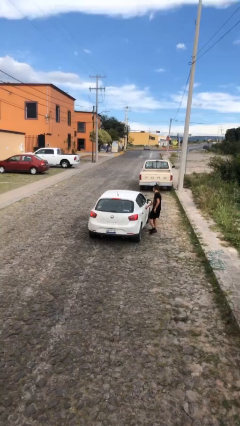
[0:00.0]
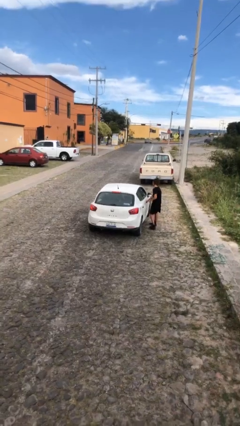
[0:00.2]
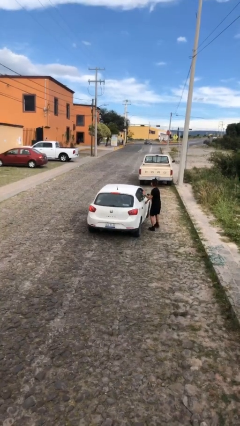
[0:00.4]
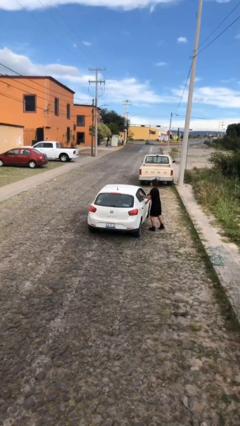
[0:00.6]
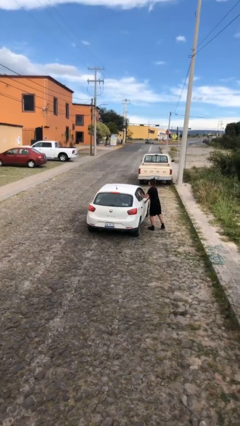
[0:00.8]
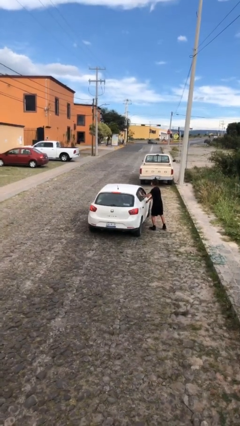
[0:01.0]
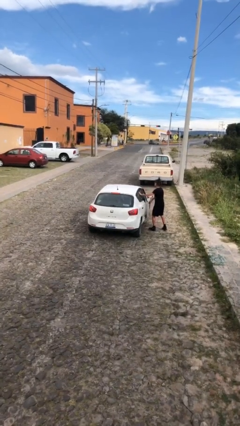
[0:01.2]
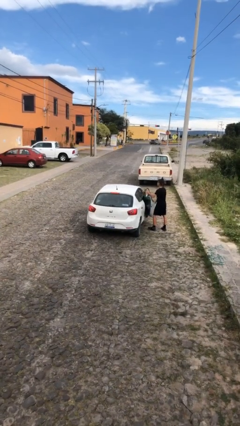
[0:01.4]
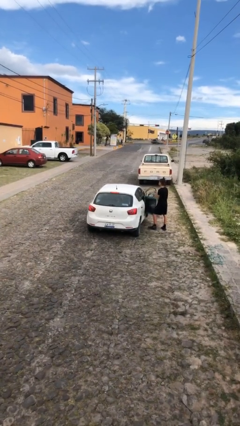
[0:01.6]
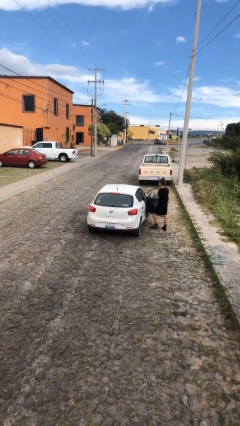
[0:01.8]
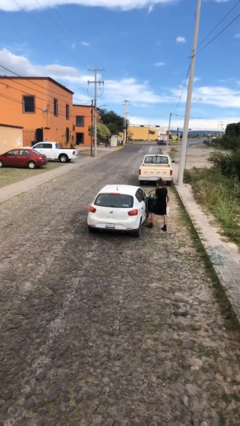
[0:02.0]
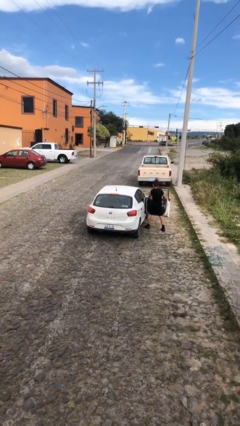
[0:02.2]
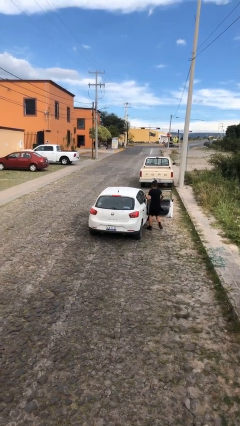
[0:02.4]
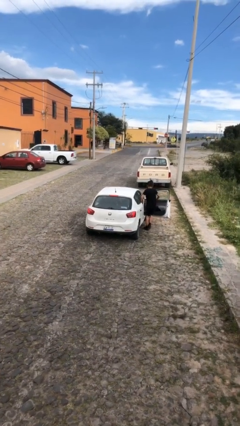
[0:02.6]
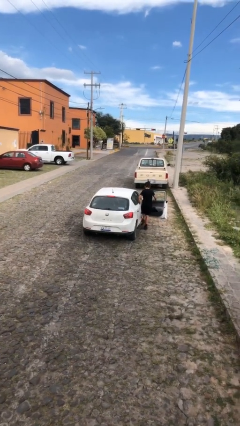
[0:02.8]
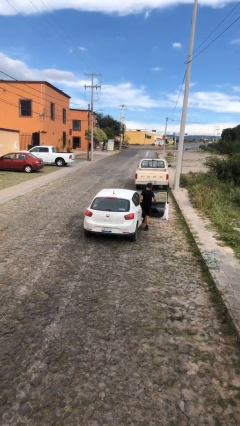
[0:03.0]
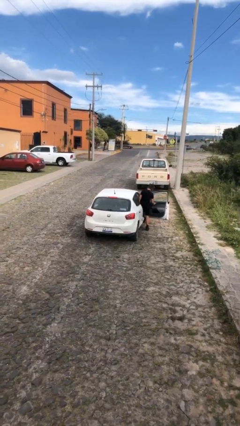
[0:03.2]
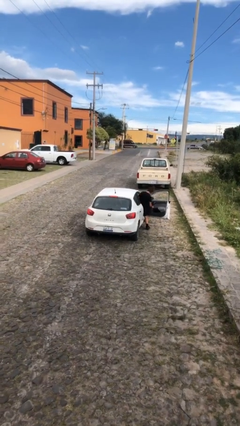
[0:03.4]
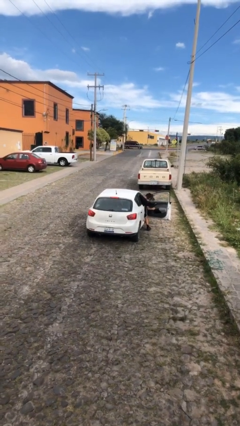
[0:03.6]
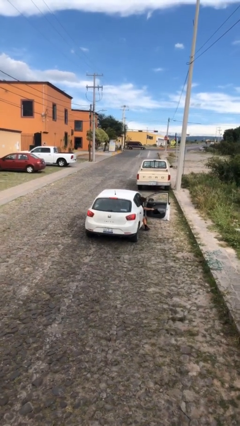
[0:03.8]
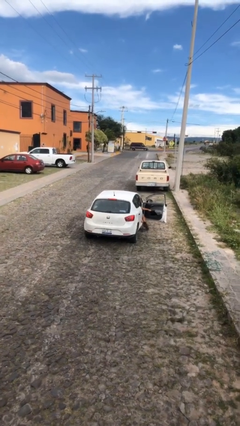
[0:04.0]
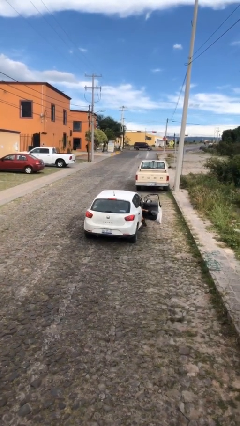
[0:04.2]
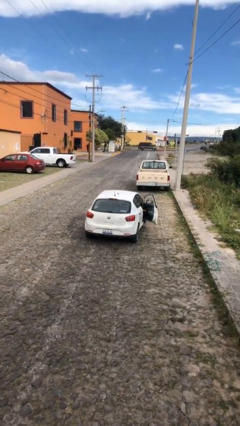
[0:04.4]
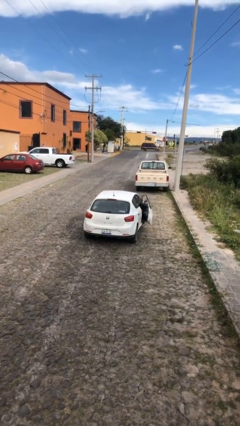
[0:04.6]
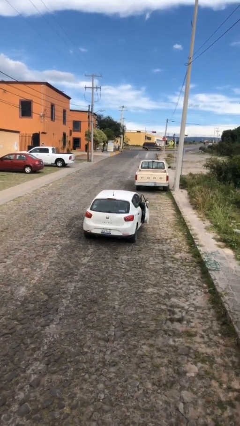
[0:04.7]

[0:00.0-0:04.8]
car picks up person

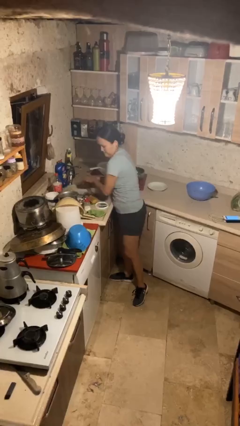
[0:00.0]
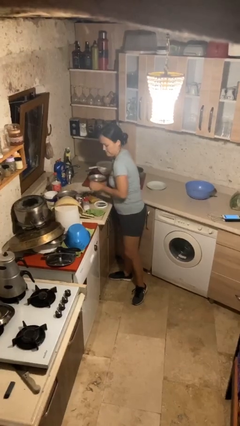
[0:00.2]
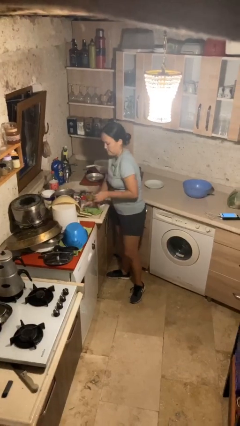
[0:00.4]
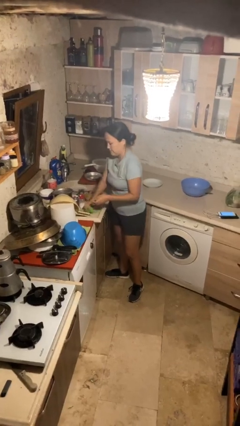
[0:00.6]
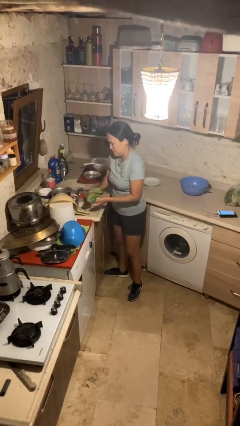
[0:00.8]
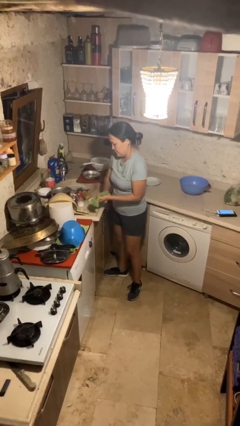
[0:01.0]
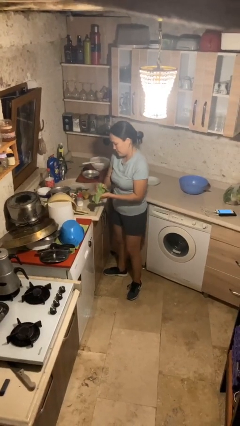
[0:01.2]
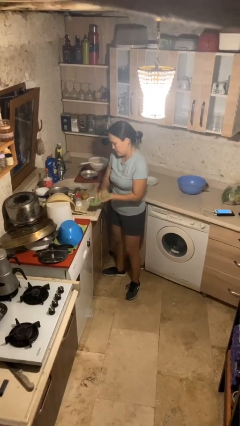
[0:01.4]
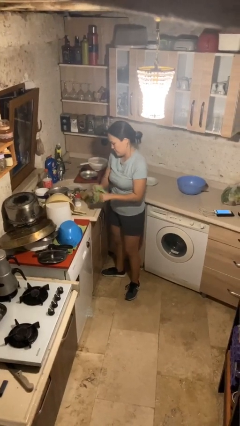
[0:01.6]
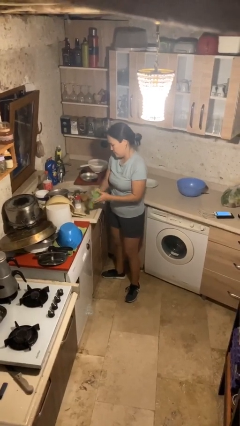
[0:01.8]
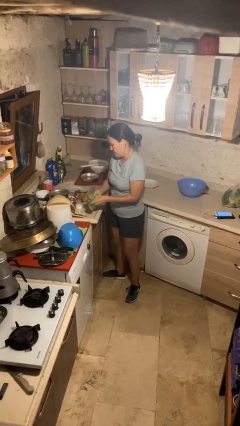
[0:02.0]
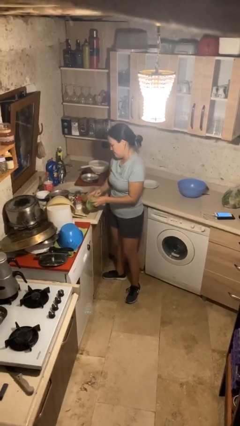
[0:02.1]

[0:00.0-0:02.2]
person dries hands with towel

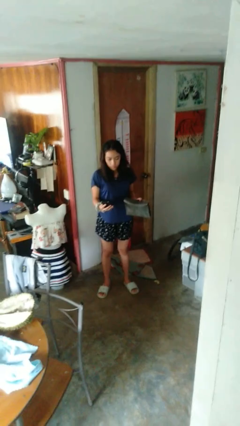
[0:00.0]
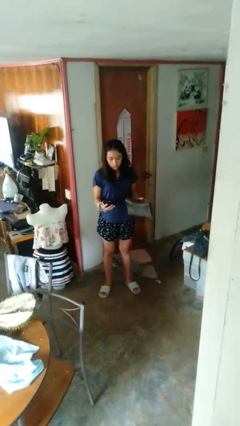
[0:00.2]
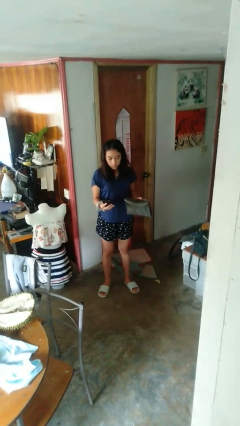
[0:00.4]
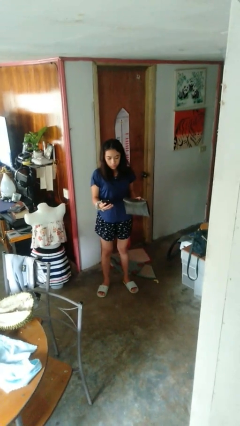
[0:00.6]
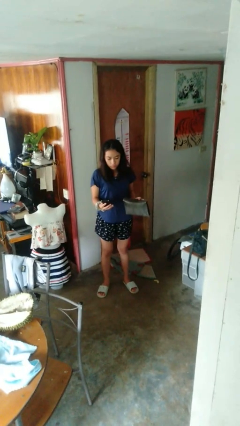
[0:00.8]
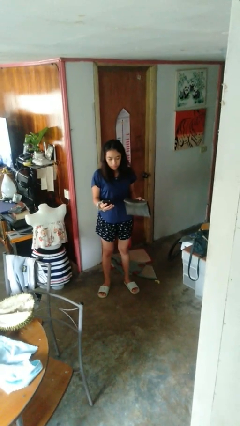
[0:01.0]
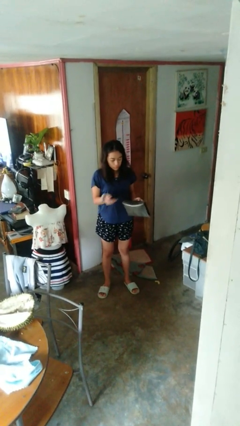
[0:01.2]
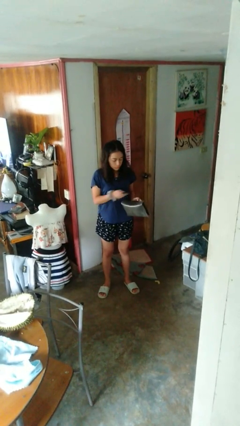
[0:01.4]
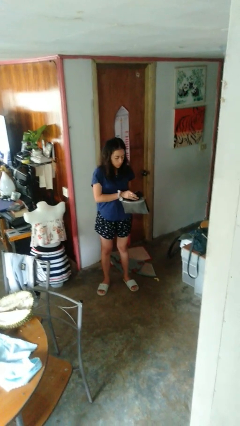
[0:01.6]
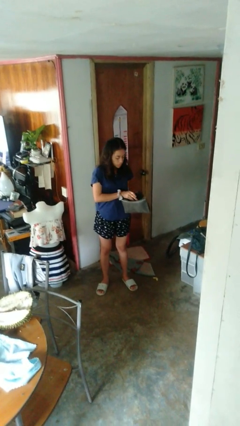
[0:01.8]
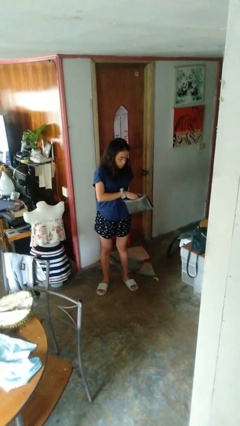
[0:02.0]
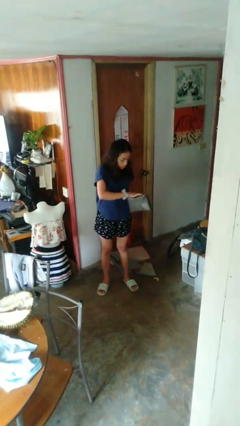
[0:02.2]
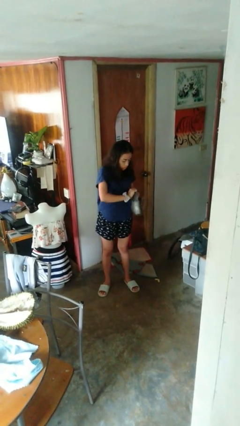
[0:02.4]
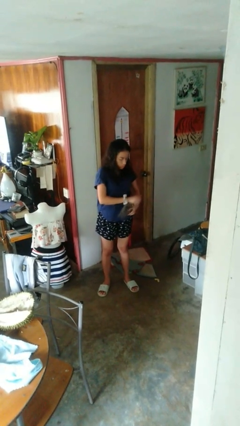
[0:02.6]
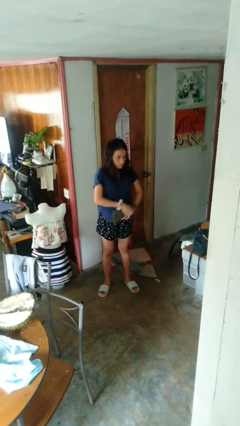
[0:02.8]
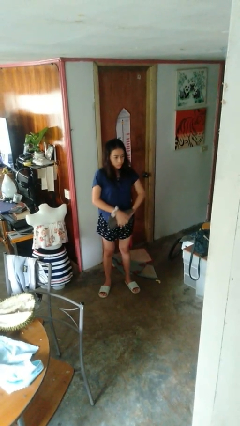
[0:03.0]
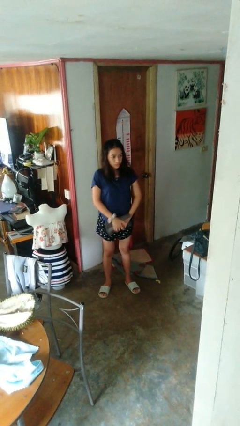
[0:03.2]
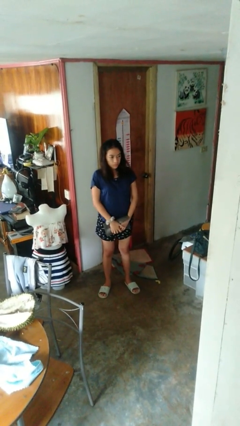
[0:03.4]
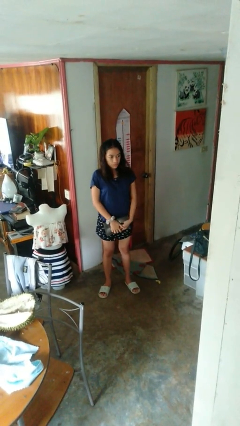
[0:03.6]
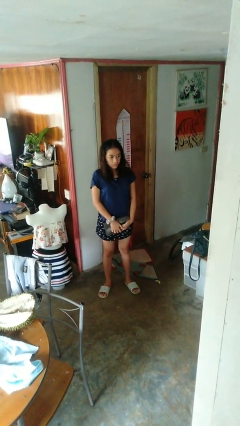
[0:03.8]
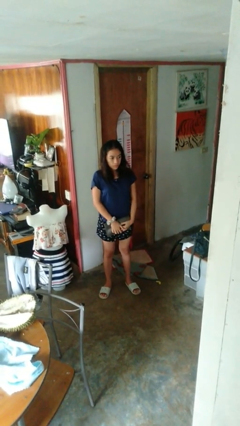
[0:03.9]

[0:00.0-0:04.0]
person puts object into purse

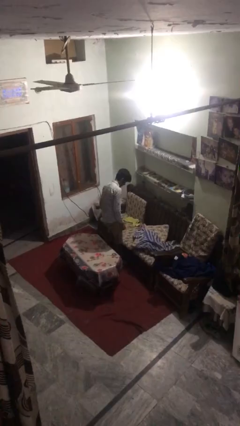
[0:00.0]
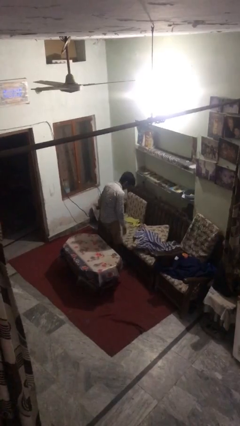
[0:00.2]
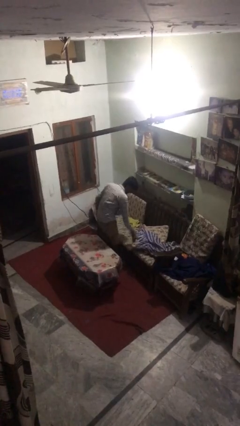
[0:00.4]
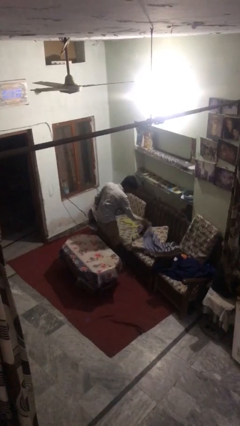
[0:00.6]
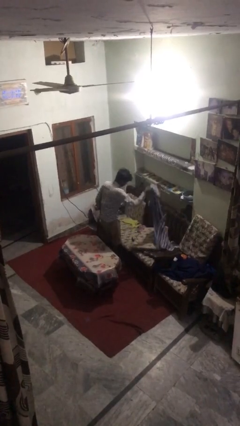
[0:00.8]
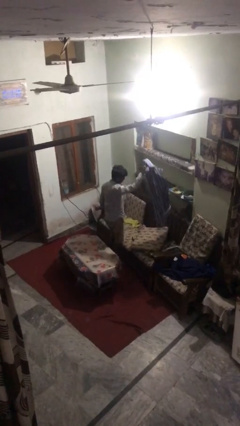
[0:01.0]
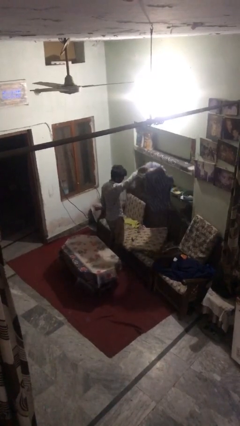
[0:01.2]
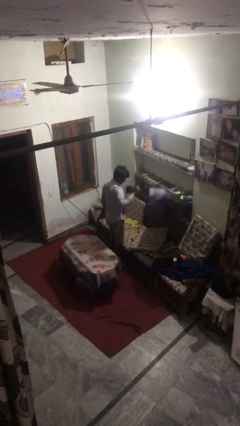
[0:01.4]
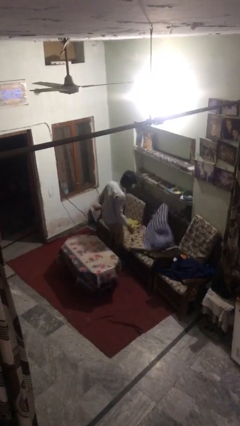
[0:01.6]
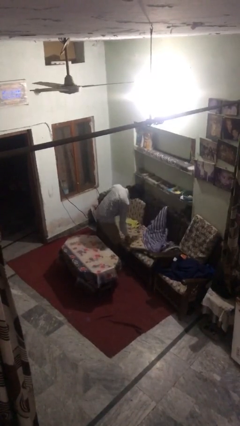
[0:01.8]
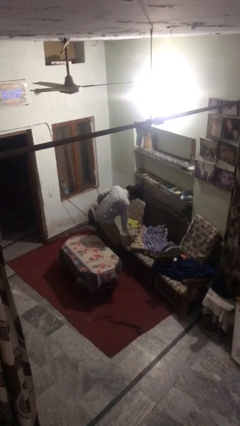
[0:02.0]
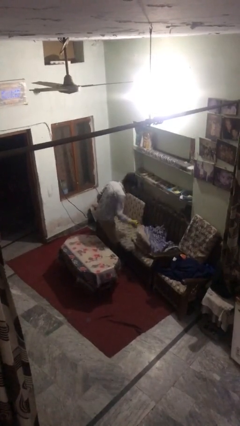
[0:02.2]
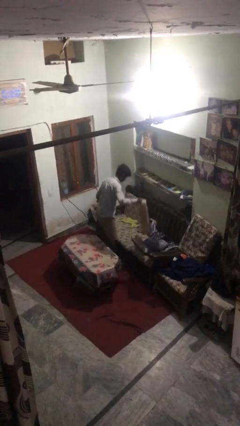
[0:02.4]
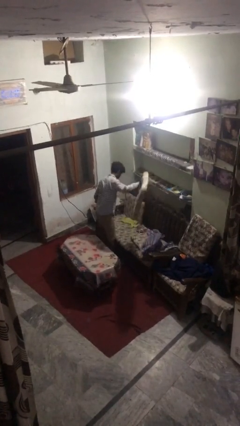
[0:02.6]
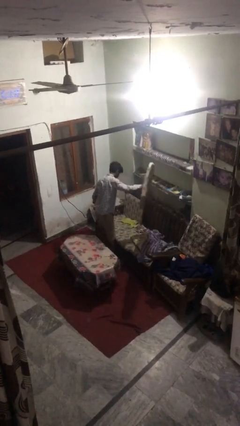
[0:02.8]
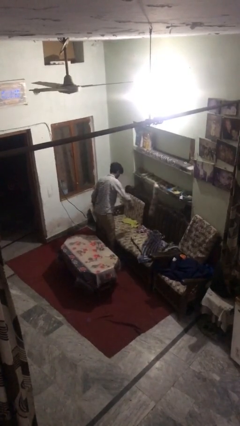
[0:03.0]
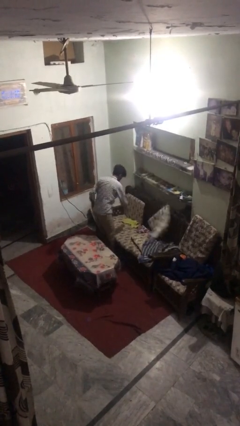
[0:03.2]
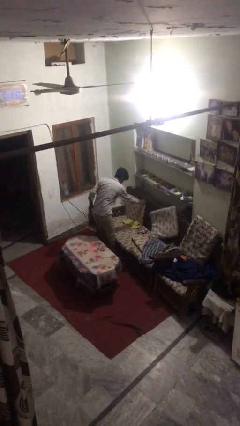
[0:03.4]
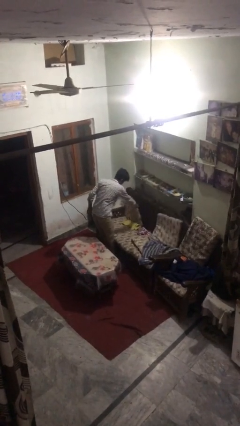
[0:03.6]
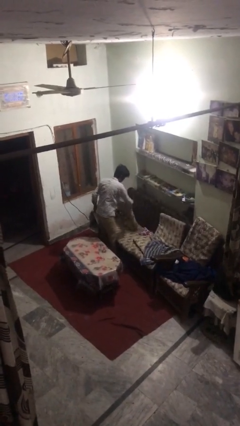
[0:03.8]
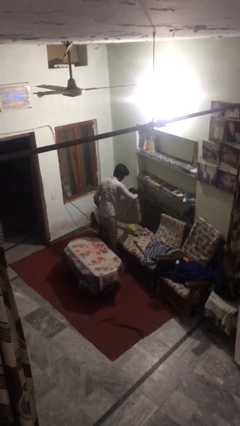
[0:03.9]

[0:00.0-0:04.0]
person searches in couch

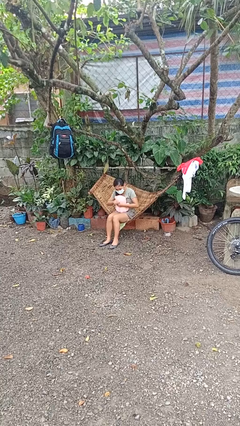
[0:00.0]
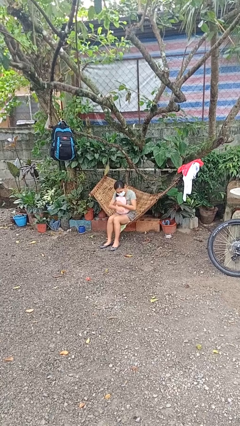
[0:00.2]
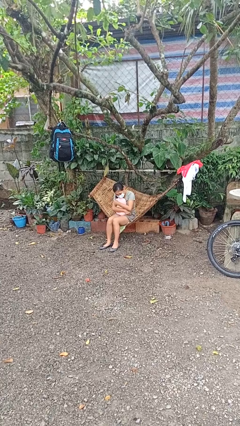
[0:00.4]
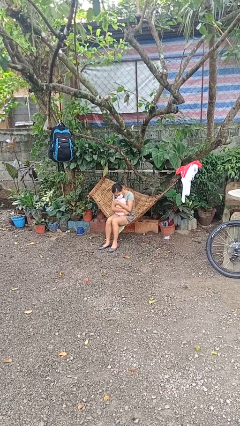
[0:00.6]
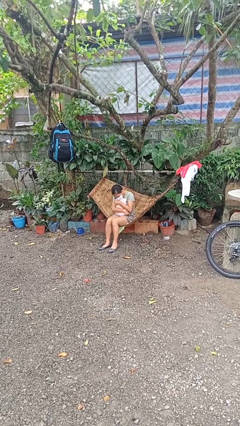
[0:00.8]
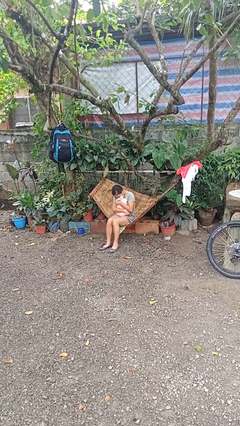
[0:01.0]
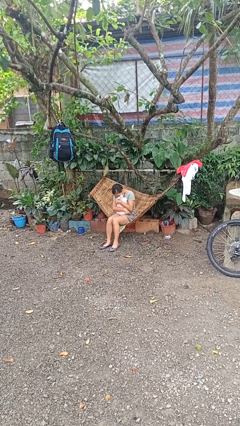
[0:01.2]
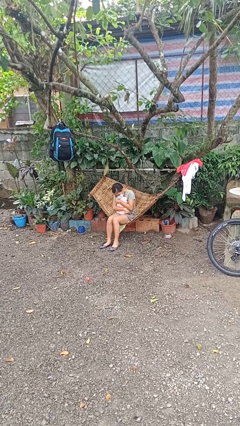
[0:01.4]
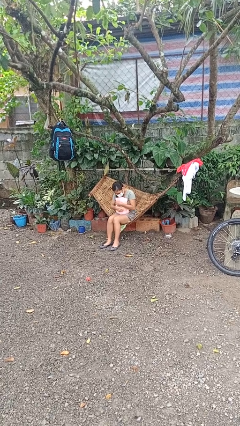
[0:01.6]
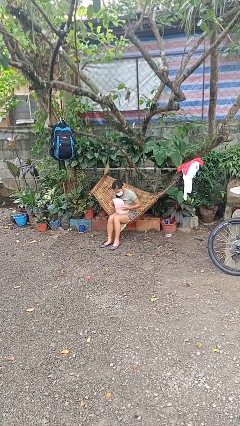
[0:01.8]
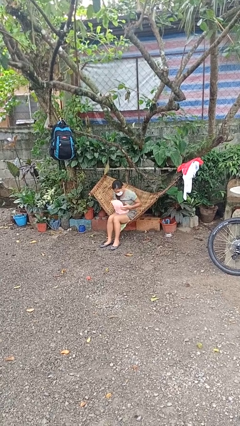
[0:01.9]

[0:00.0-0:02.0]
person hugs stuffed animal
